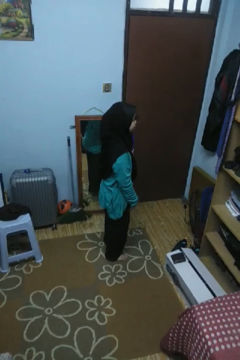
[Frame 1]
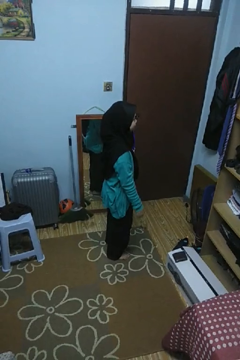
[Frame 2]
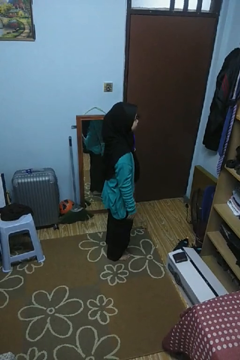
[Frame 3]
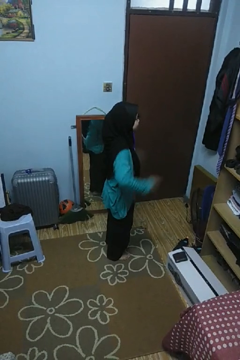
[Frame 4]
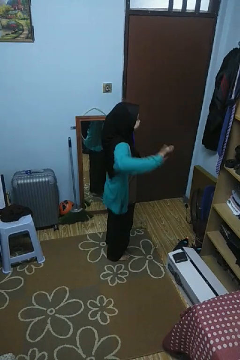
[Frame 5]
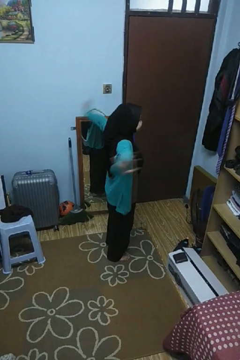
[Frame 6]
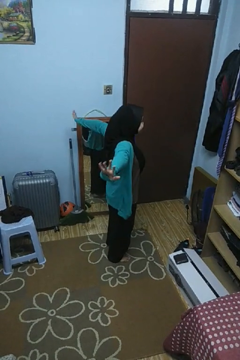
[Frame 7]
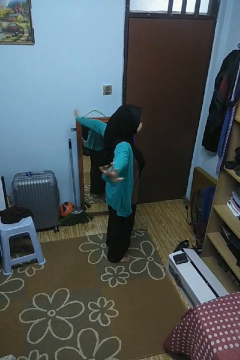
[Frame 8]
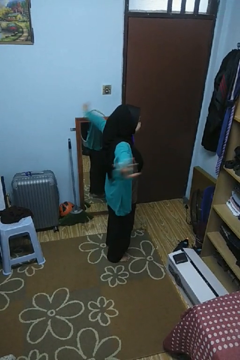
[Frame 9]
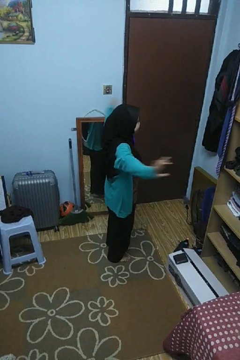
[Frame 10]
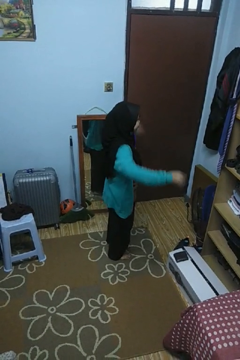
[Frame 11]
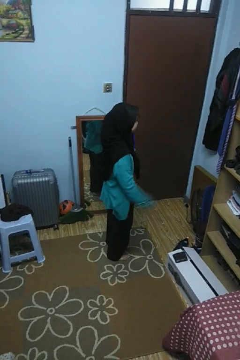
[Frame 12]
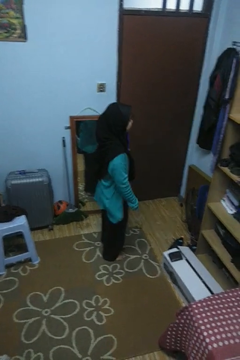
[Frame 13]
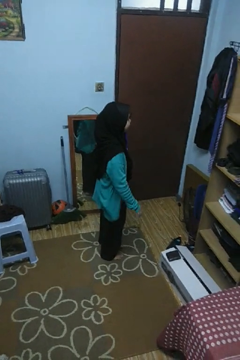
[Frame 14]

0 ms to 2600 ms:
person stretches arms to side

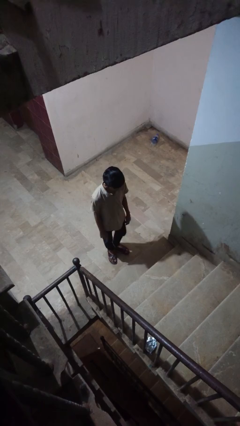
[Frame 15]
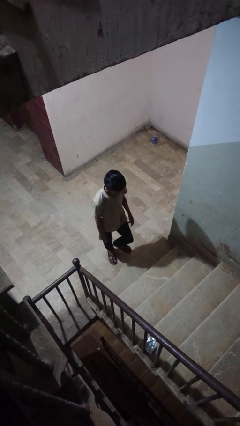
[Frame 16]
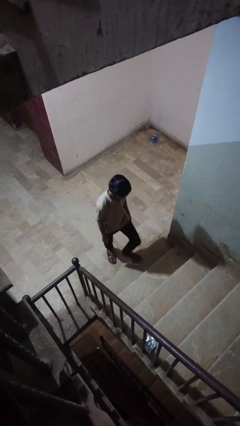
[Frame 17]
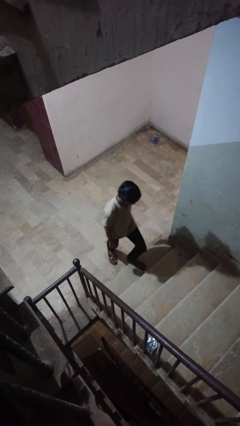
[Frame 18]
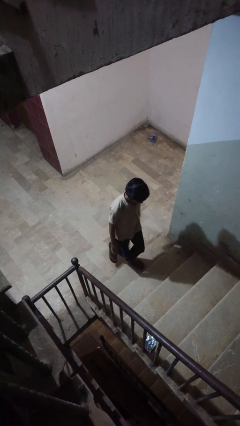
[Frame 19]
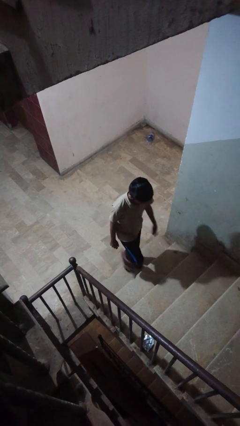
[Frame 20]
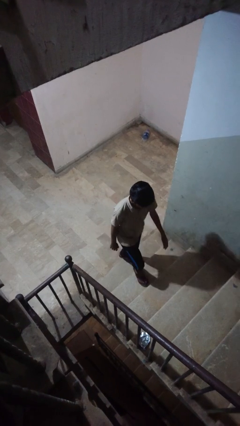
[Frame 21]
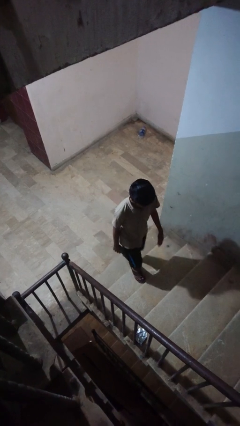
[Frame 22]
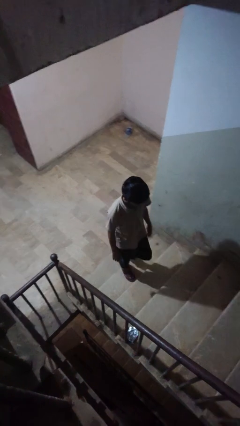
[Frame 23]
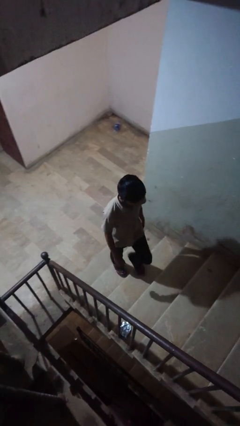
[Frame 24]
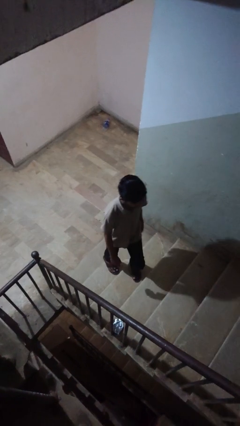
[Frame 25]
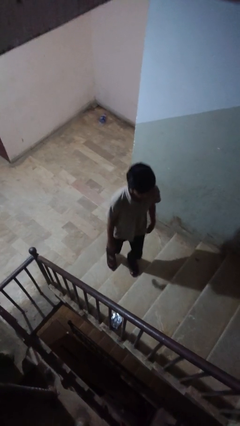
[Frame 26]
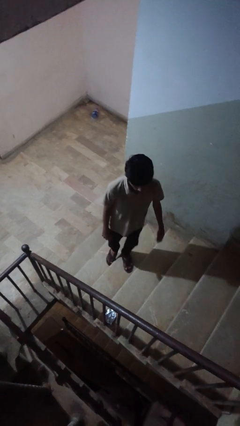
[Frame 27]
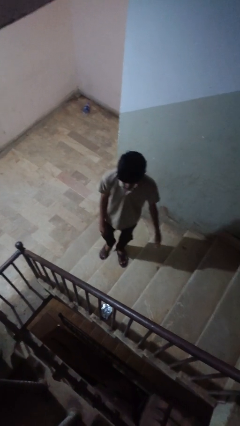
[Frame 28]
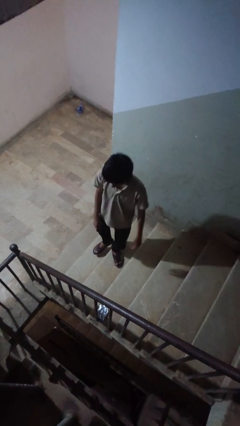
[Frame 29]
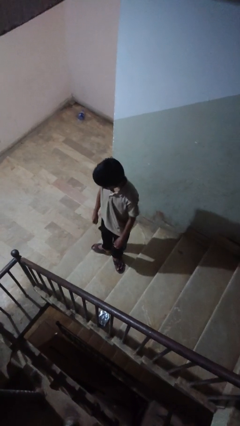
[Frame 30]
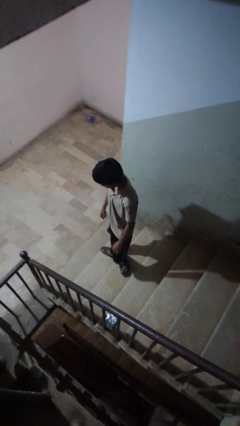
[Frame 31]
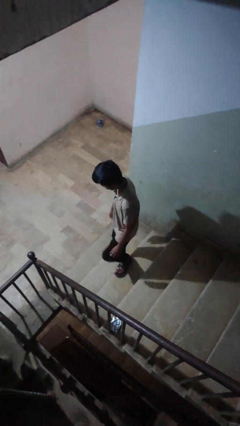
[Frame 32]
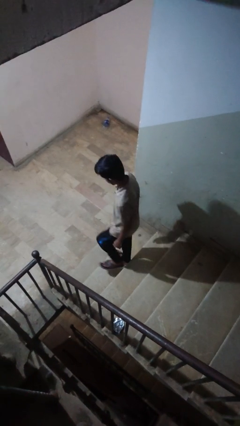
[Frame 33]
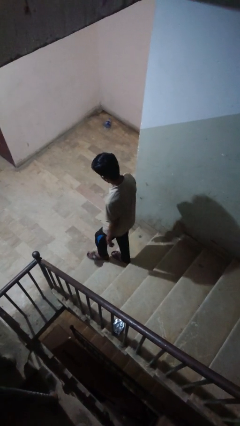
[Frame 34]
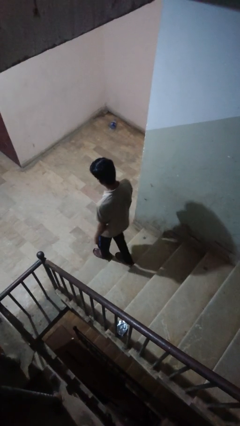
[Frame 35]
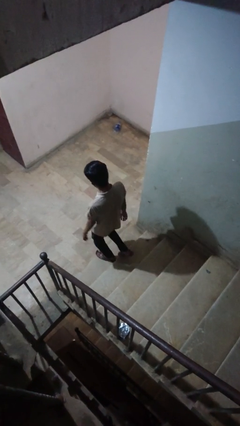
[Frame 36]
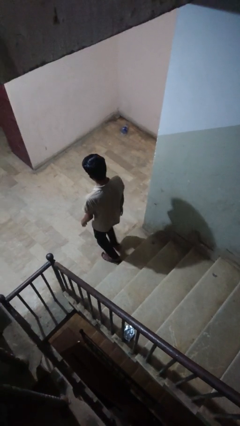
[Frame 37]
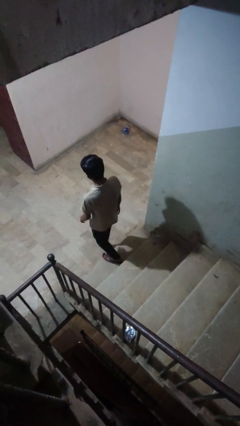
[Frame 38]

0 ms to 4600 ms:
person climbs up stairs

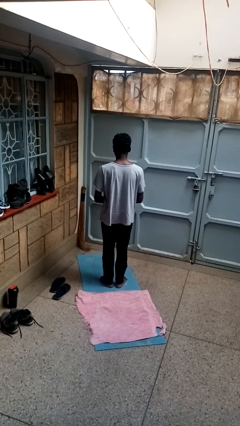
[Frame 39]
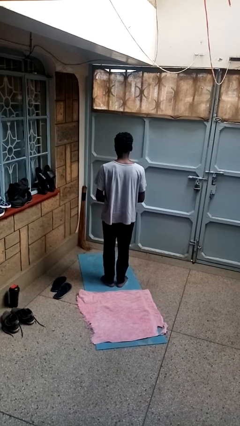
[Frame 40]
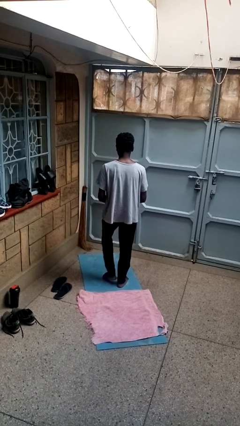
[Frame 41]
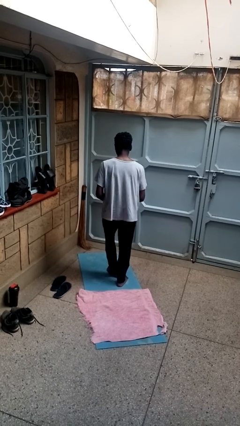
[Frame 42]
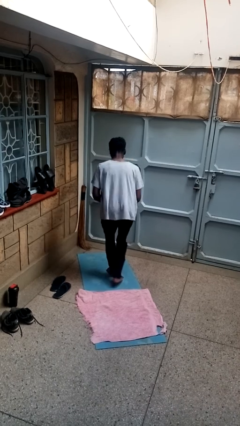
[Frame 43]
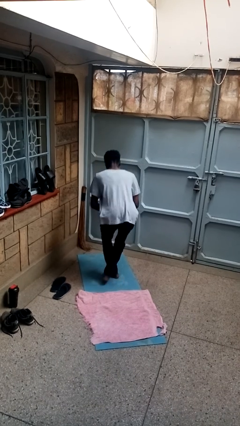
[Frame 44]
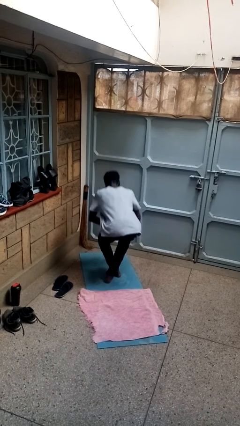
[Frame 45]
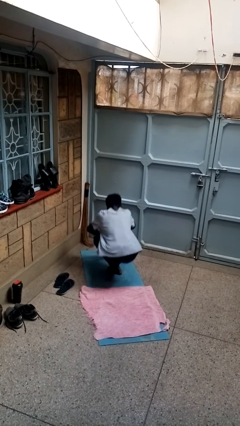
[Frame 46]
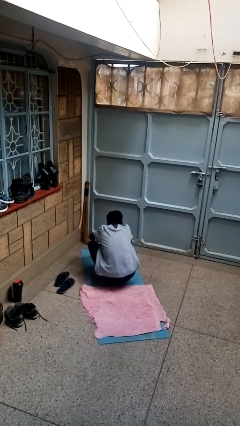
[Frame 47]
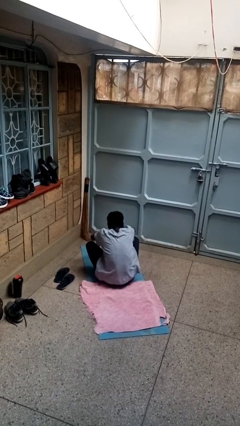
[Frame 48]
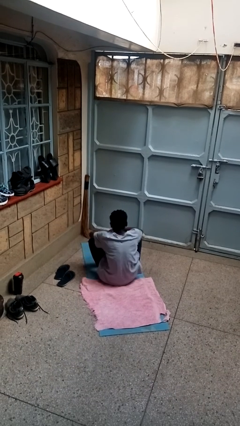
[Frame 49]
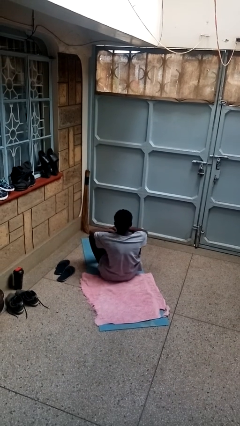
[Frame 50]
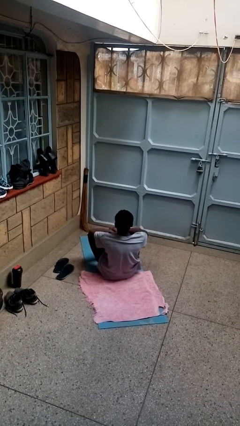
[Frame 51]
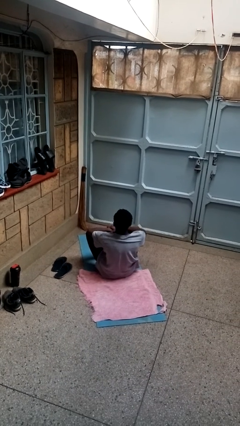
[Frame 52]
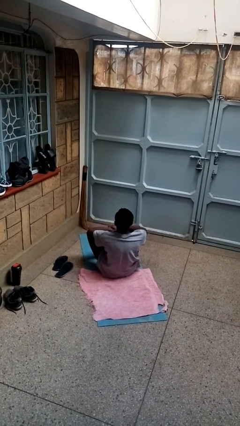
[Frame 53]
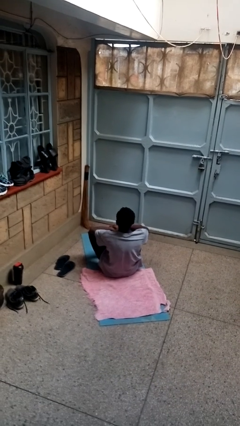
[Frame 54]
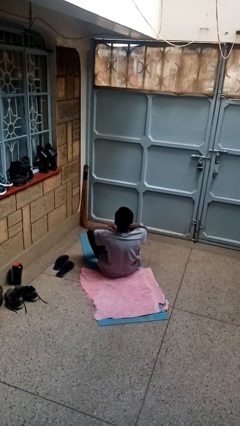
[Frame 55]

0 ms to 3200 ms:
person sits crisscross

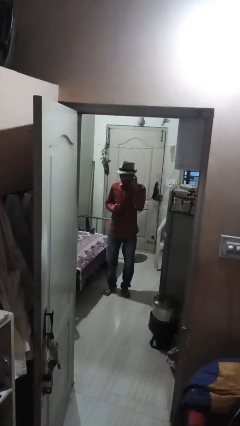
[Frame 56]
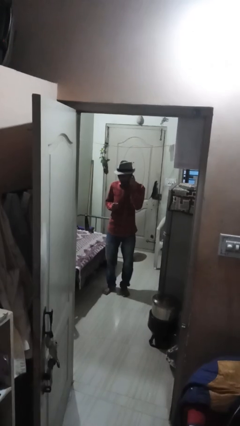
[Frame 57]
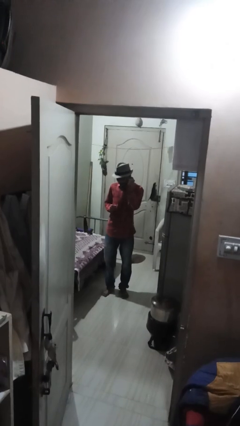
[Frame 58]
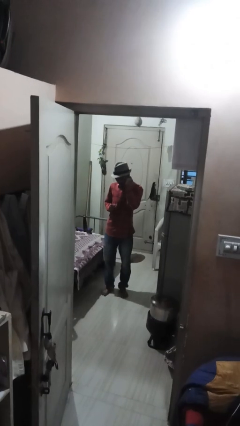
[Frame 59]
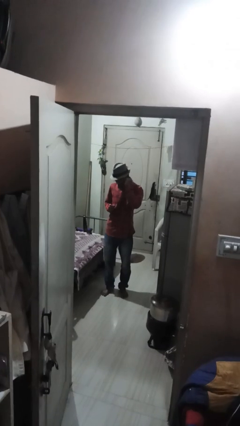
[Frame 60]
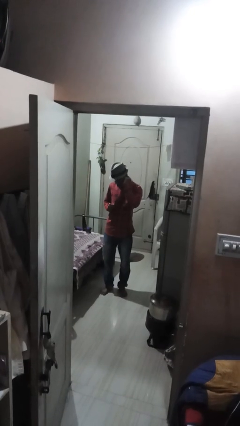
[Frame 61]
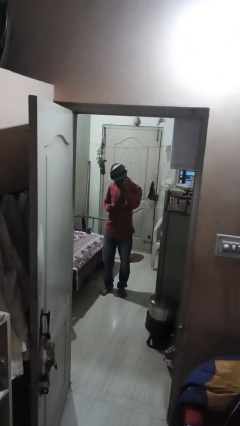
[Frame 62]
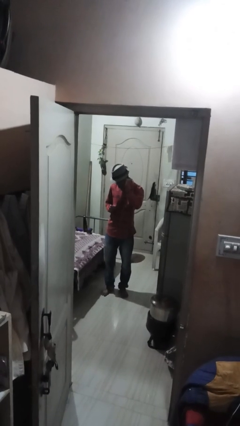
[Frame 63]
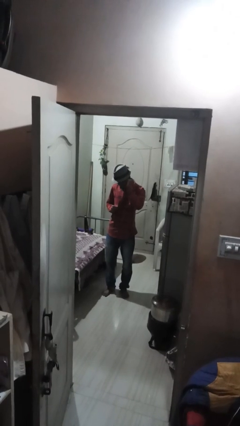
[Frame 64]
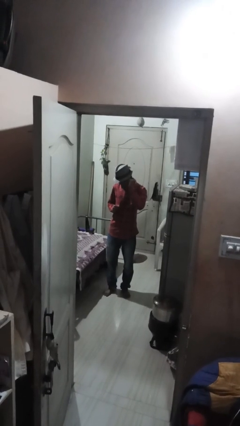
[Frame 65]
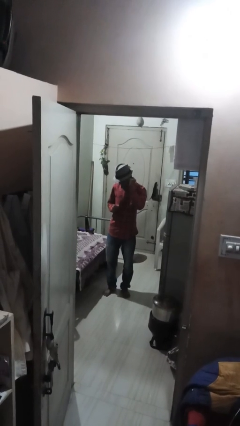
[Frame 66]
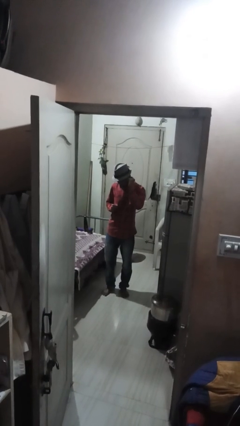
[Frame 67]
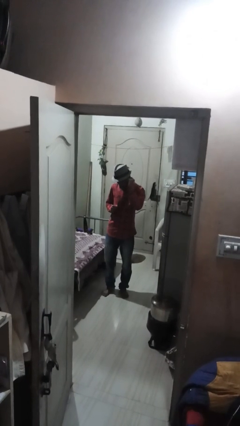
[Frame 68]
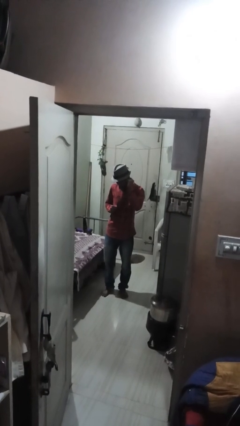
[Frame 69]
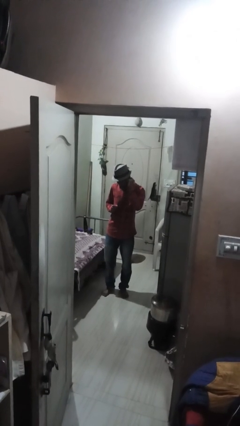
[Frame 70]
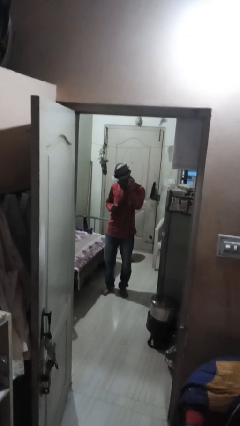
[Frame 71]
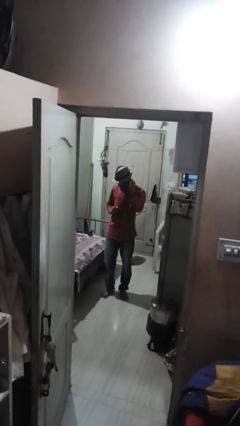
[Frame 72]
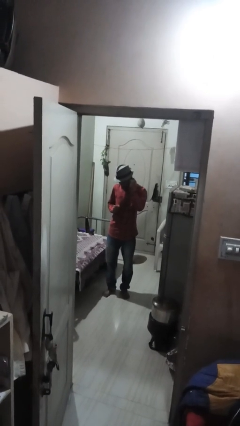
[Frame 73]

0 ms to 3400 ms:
person touches earlobe

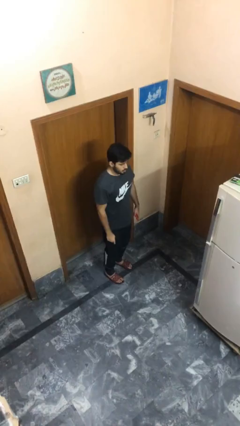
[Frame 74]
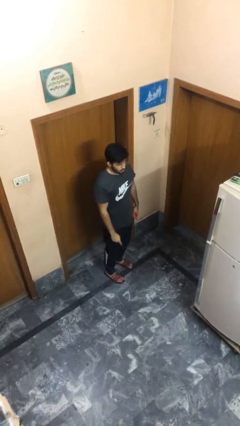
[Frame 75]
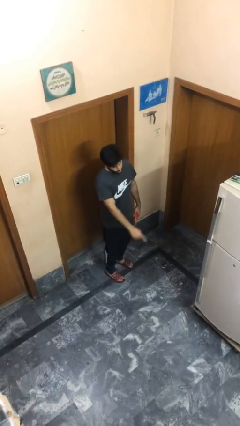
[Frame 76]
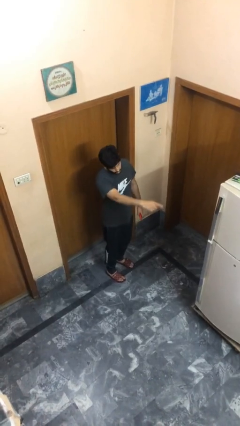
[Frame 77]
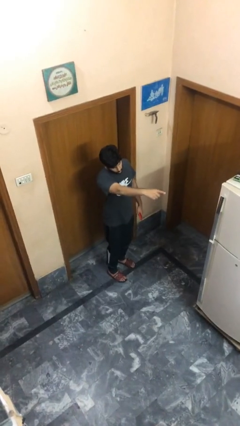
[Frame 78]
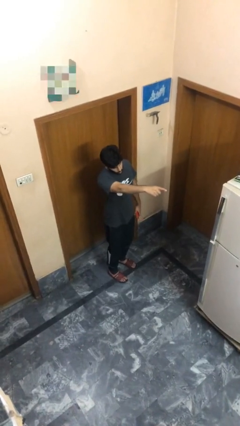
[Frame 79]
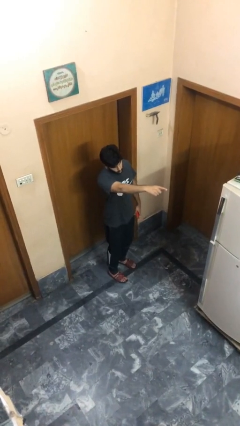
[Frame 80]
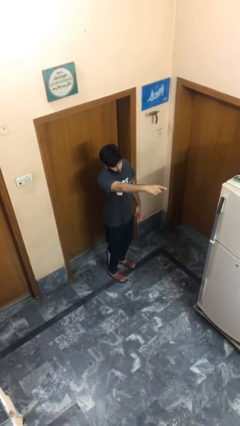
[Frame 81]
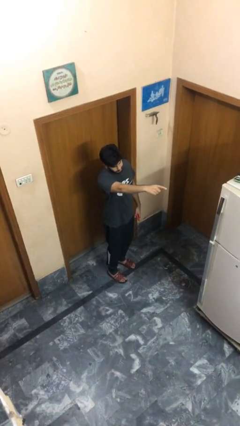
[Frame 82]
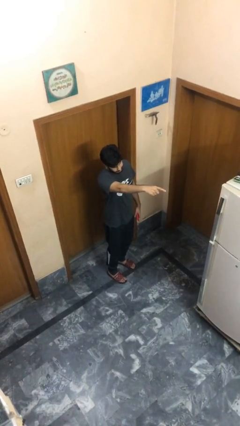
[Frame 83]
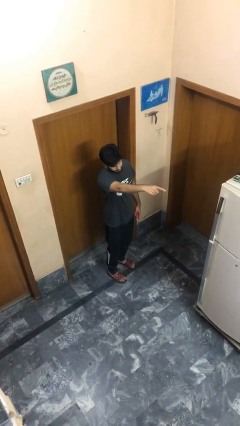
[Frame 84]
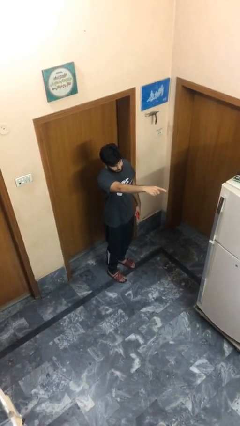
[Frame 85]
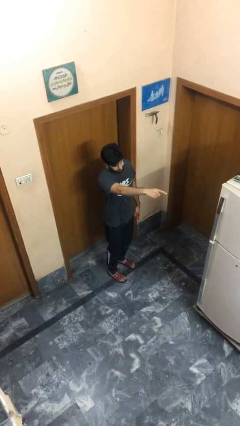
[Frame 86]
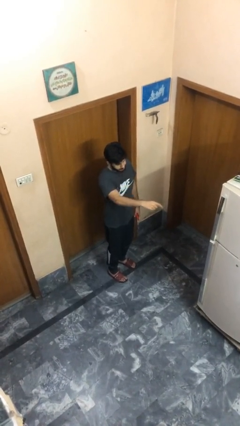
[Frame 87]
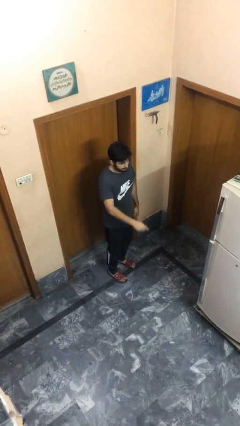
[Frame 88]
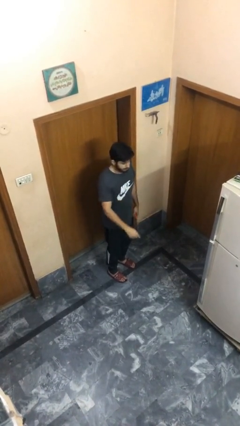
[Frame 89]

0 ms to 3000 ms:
person points at person

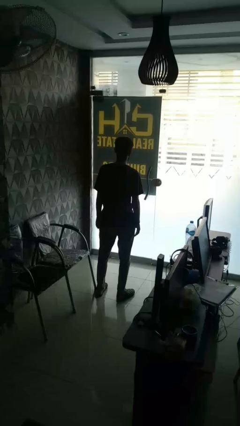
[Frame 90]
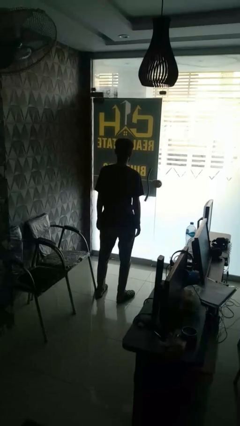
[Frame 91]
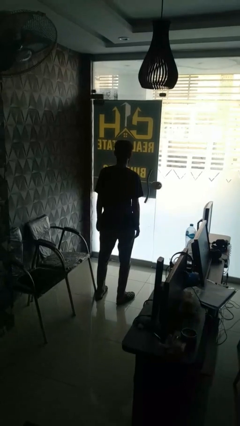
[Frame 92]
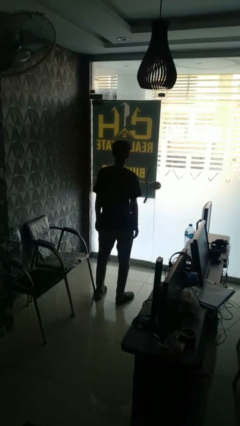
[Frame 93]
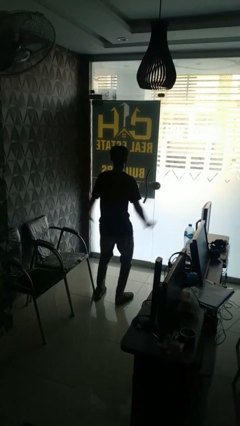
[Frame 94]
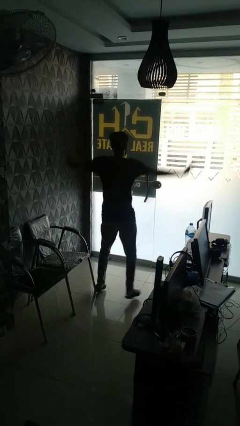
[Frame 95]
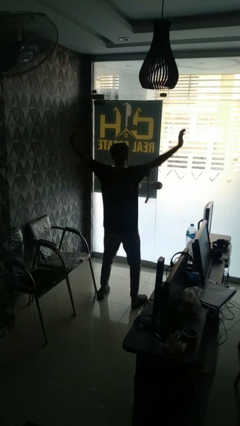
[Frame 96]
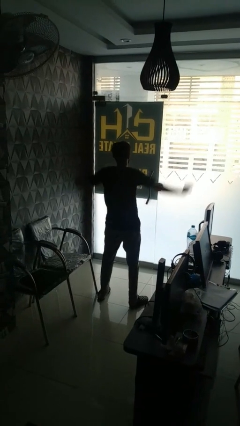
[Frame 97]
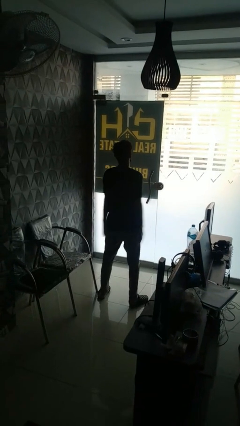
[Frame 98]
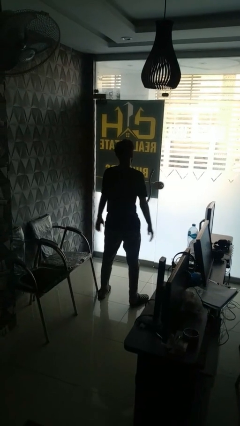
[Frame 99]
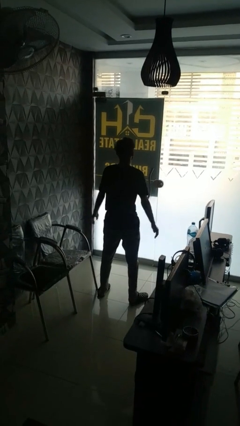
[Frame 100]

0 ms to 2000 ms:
person exercises with jumping jacks
